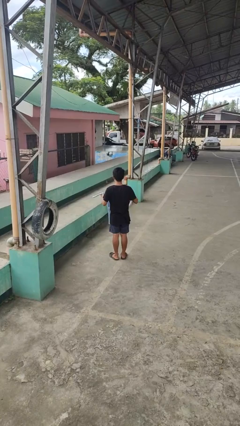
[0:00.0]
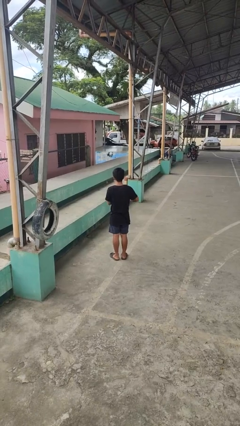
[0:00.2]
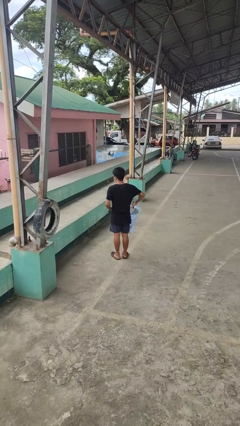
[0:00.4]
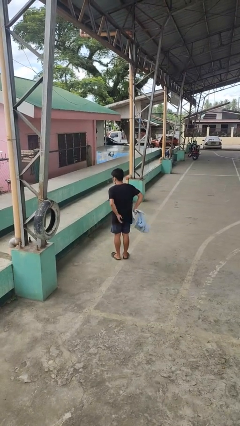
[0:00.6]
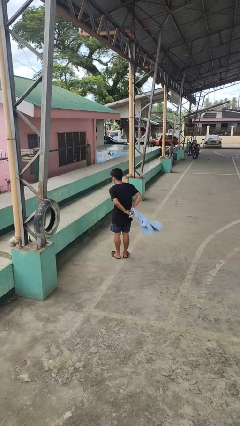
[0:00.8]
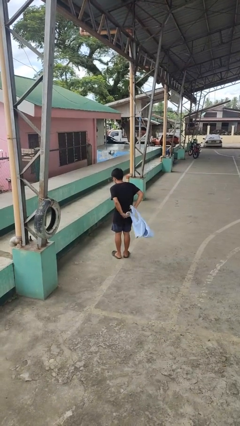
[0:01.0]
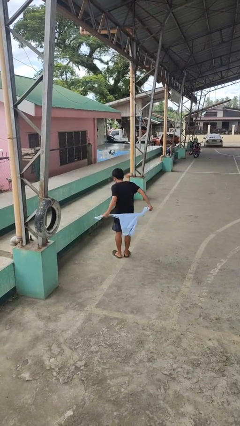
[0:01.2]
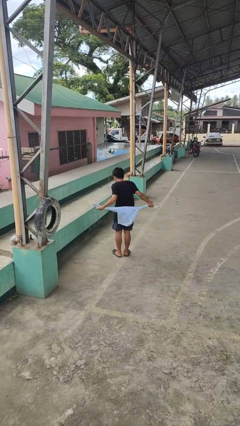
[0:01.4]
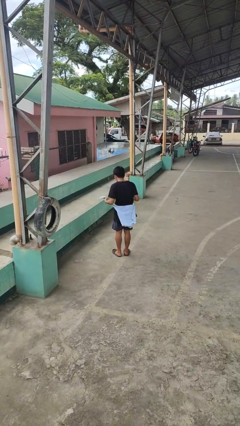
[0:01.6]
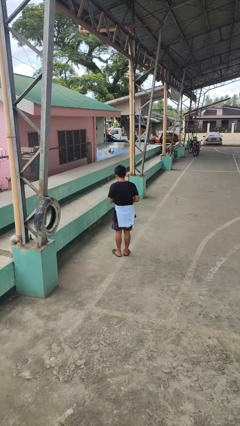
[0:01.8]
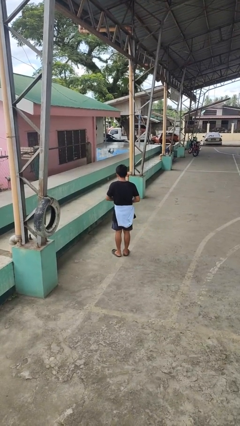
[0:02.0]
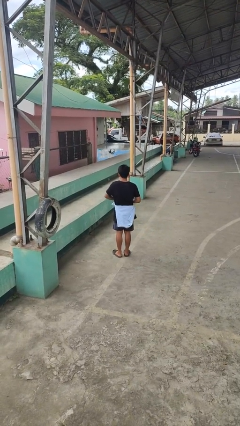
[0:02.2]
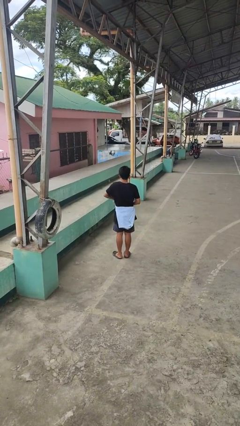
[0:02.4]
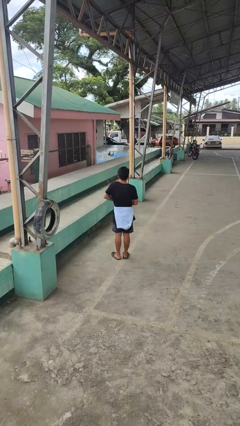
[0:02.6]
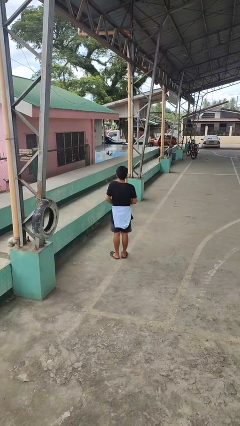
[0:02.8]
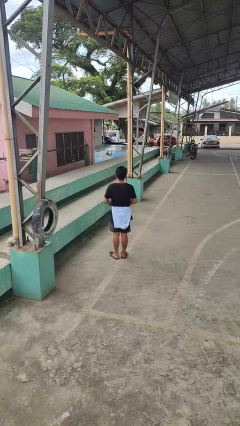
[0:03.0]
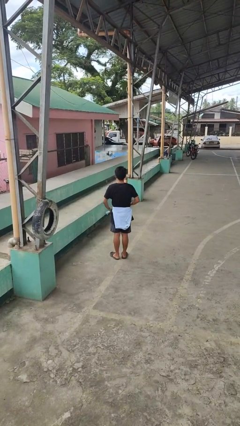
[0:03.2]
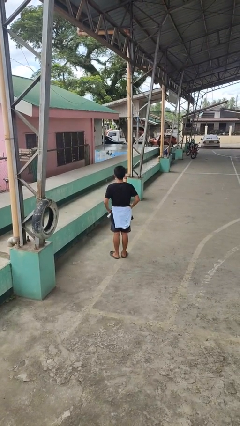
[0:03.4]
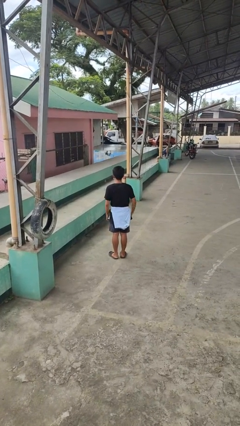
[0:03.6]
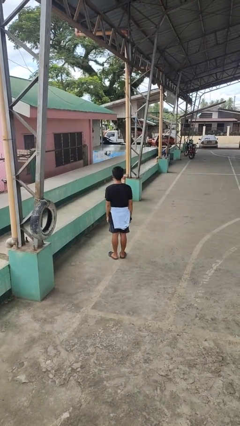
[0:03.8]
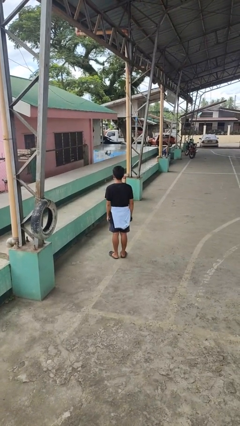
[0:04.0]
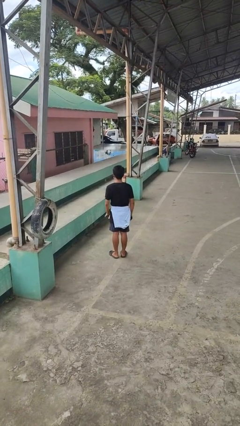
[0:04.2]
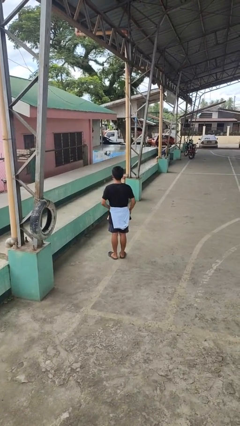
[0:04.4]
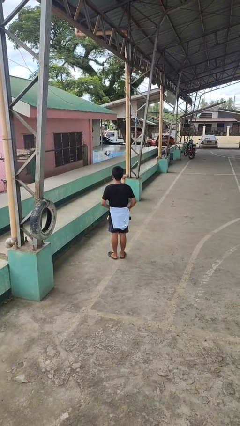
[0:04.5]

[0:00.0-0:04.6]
person ties jacket around waist

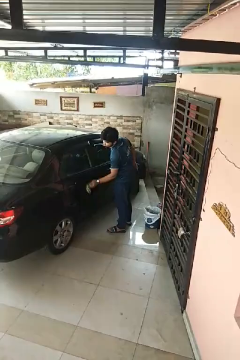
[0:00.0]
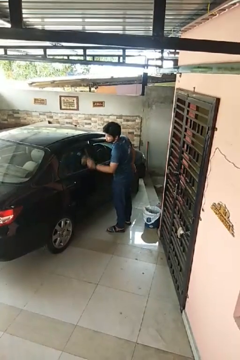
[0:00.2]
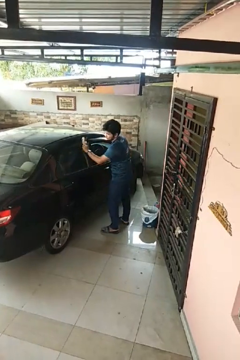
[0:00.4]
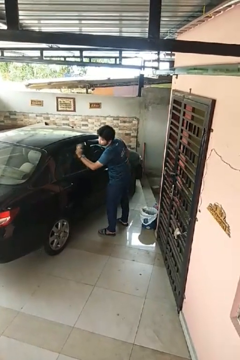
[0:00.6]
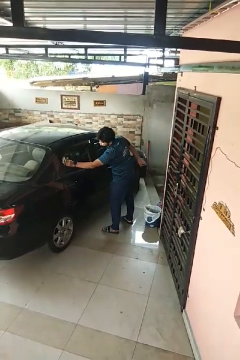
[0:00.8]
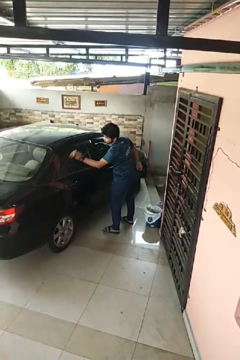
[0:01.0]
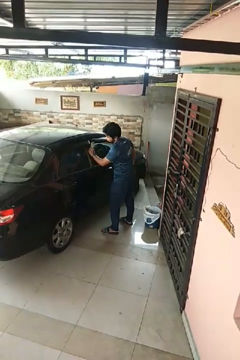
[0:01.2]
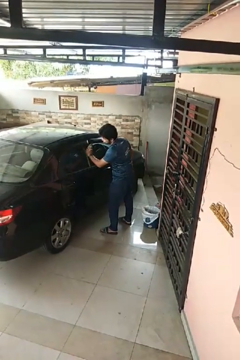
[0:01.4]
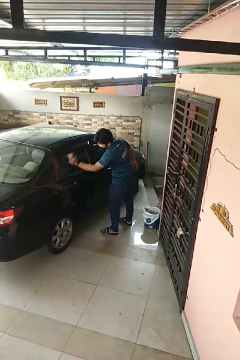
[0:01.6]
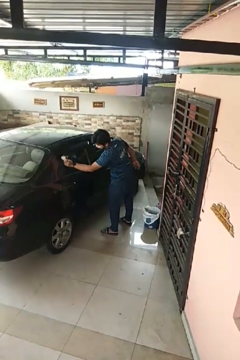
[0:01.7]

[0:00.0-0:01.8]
person polishes car with rag

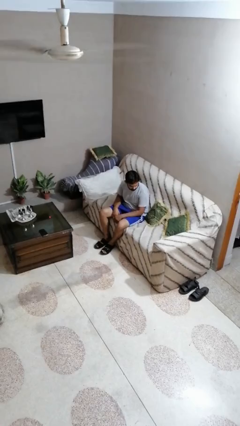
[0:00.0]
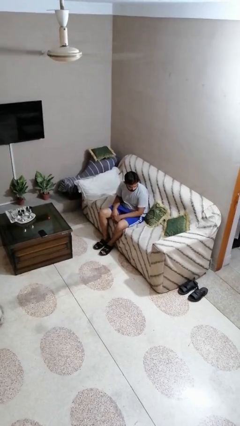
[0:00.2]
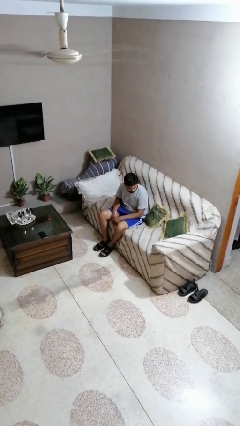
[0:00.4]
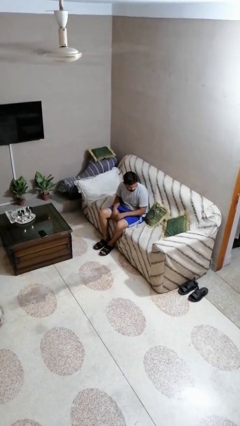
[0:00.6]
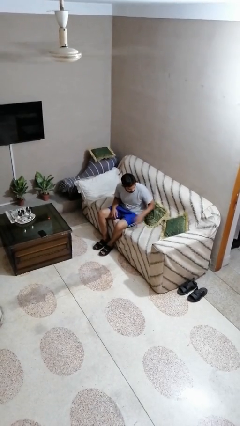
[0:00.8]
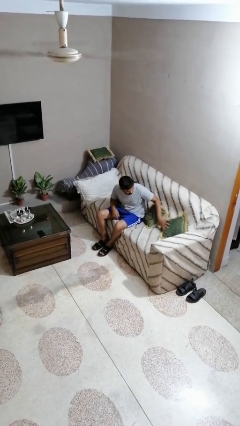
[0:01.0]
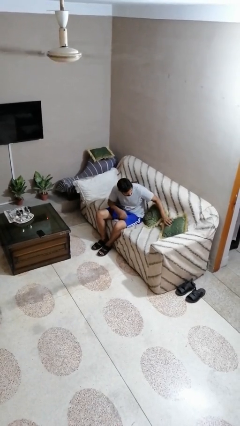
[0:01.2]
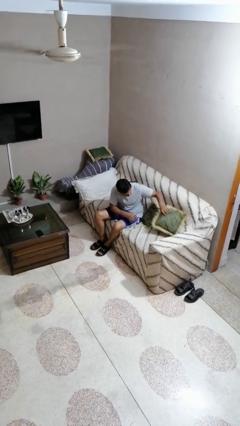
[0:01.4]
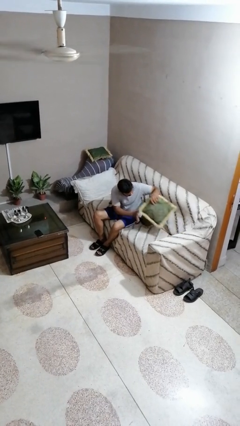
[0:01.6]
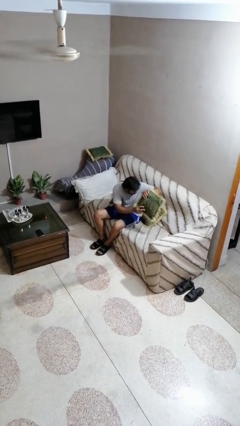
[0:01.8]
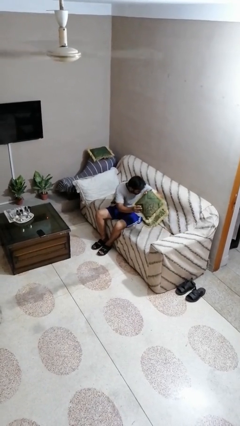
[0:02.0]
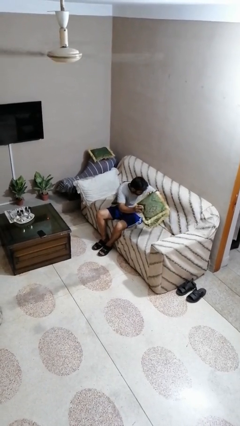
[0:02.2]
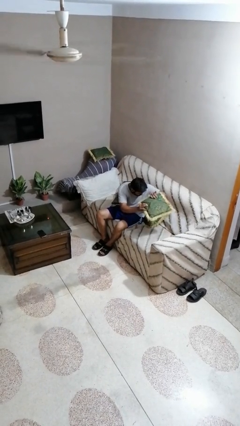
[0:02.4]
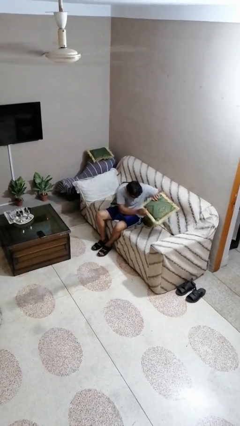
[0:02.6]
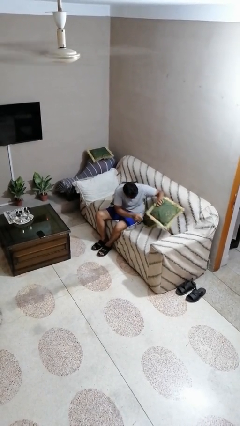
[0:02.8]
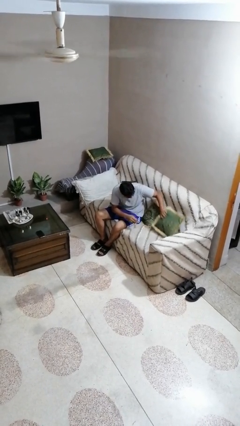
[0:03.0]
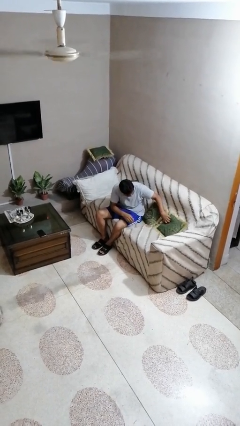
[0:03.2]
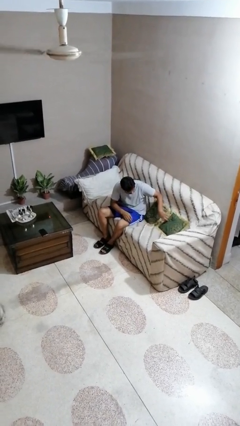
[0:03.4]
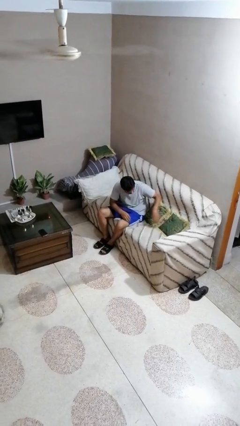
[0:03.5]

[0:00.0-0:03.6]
person searches in couch

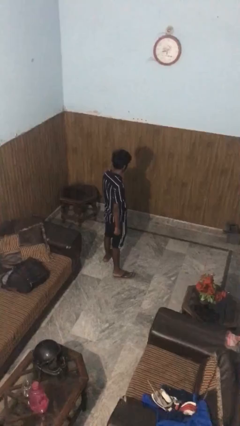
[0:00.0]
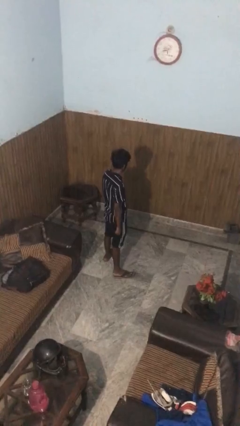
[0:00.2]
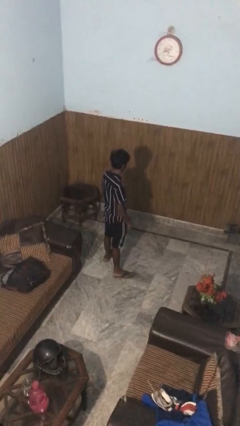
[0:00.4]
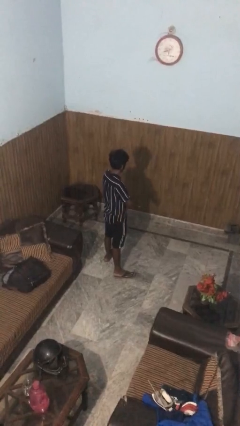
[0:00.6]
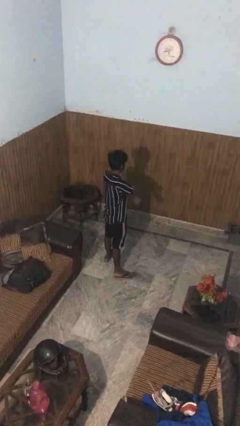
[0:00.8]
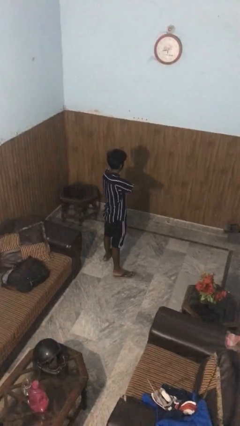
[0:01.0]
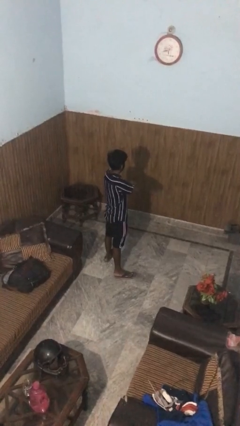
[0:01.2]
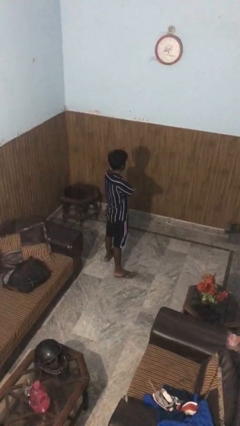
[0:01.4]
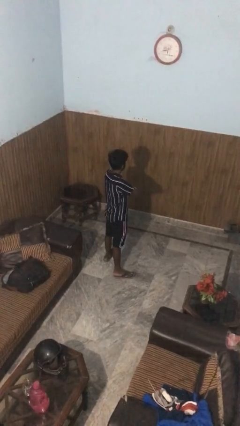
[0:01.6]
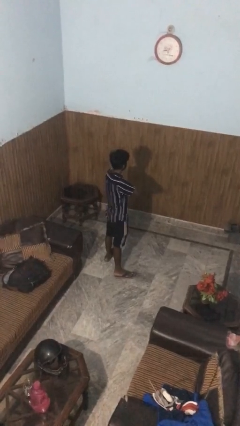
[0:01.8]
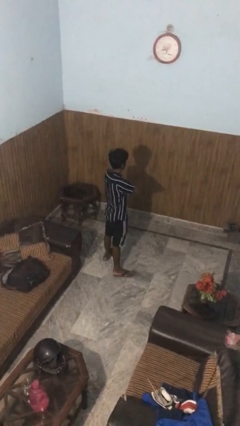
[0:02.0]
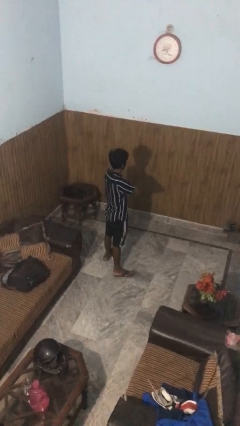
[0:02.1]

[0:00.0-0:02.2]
person crosses arms

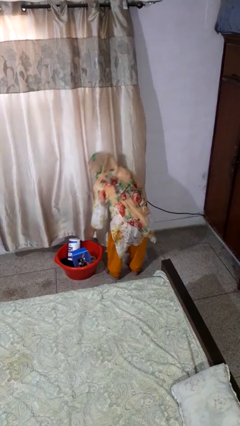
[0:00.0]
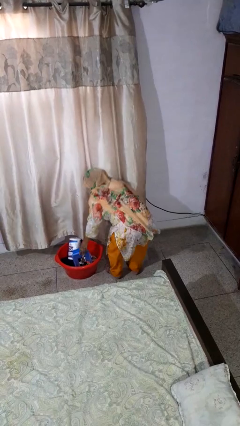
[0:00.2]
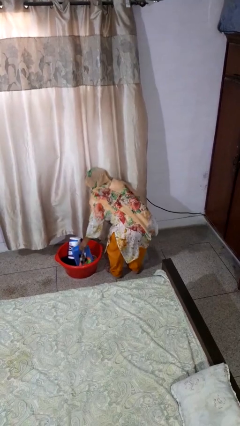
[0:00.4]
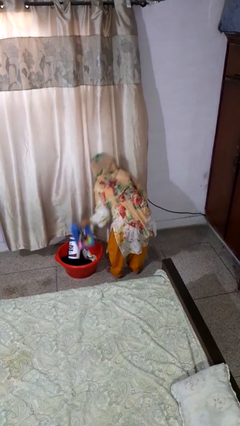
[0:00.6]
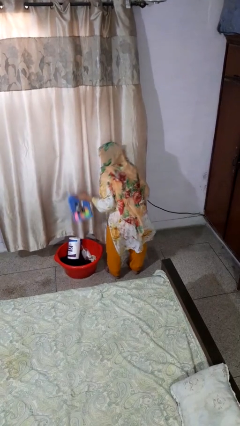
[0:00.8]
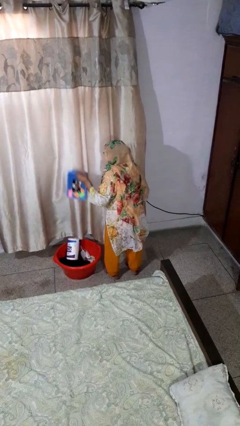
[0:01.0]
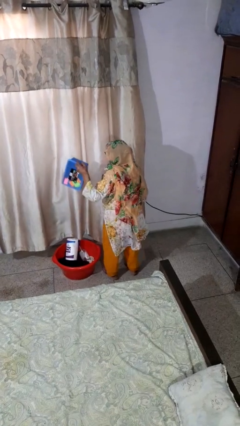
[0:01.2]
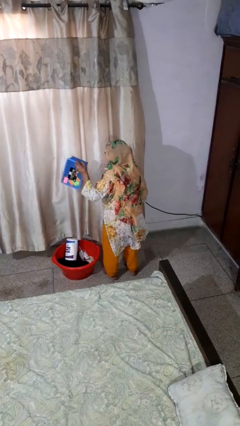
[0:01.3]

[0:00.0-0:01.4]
person takes object from basket

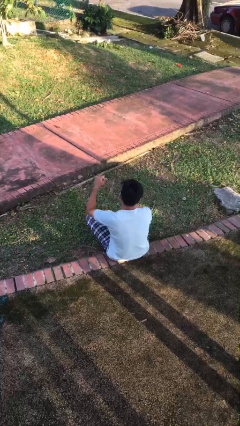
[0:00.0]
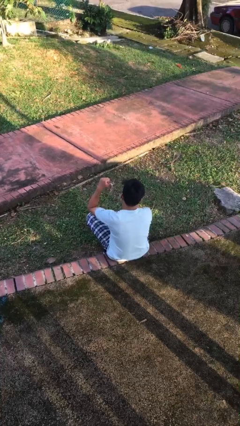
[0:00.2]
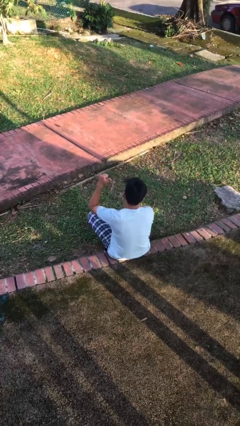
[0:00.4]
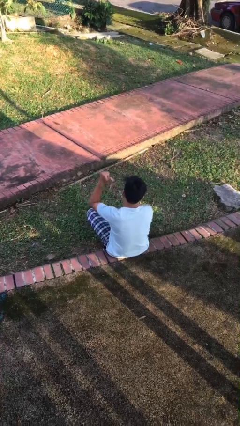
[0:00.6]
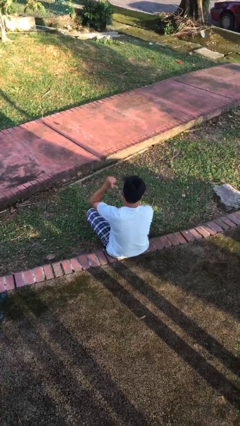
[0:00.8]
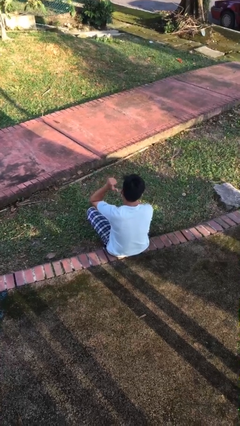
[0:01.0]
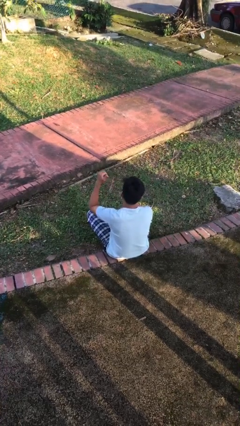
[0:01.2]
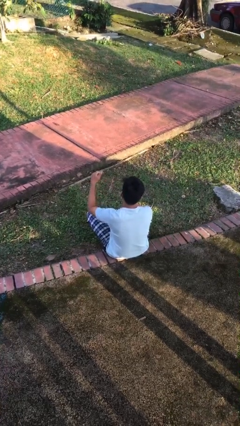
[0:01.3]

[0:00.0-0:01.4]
person gestures behind me

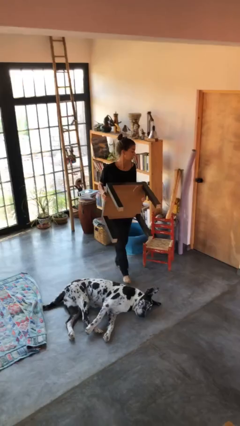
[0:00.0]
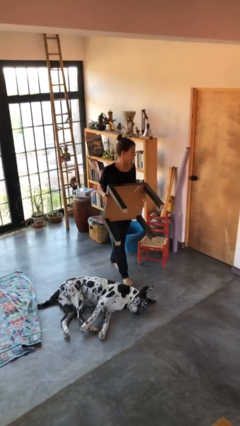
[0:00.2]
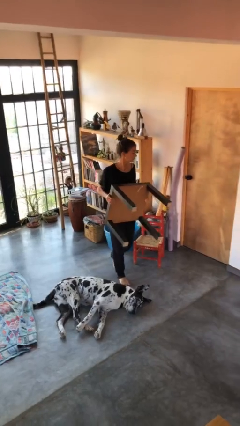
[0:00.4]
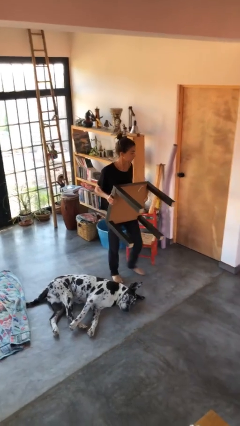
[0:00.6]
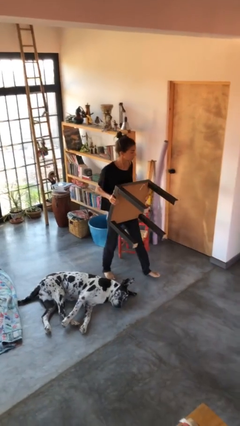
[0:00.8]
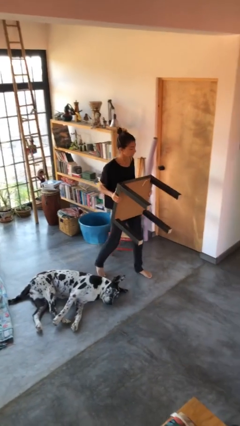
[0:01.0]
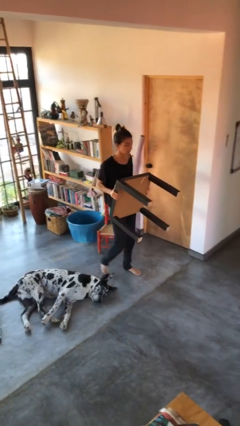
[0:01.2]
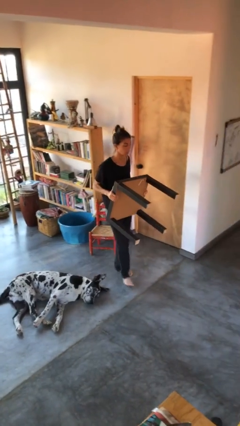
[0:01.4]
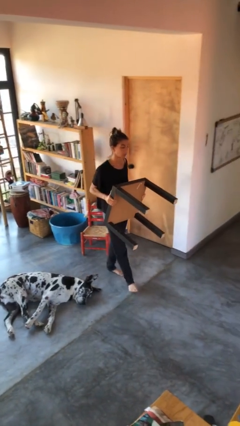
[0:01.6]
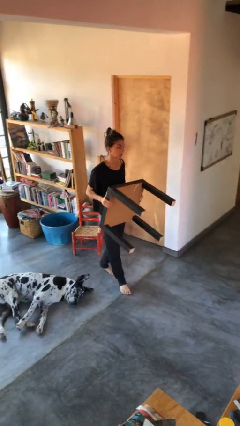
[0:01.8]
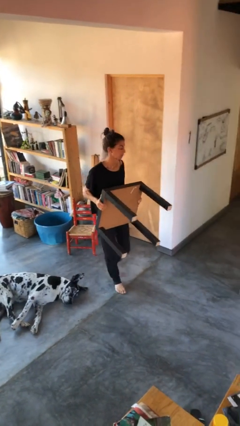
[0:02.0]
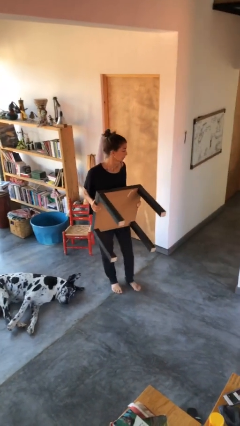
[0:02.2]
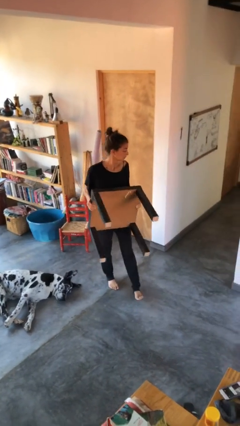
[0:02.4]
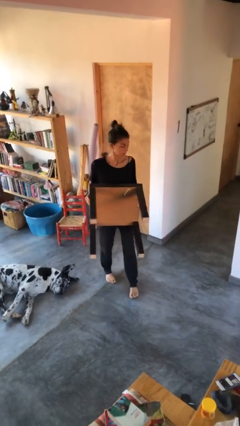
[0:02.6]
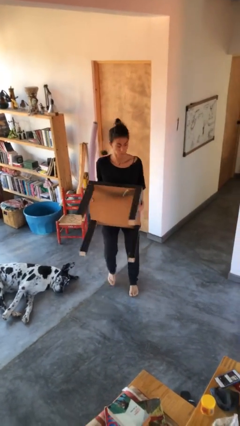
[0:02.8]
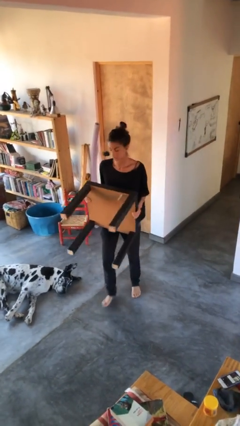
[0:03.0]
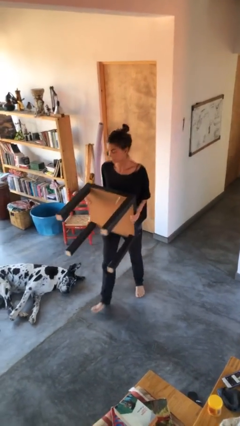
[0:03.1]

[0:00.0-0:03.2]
person carries furniture
